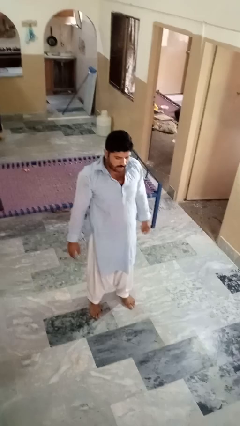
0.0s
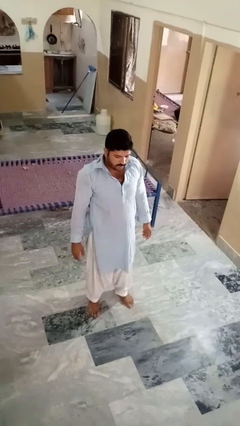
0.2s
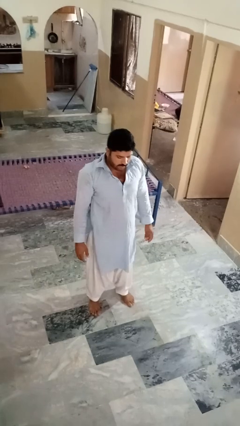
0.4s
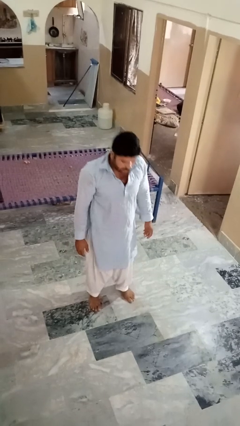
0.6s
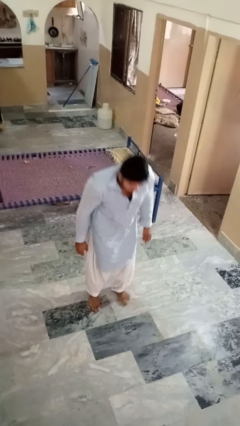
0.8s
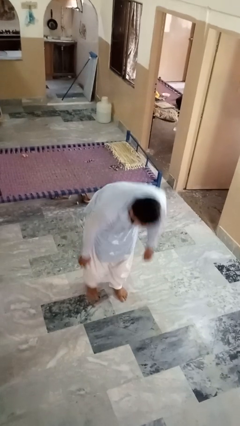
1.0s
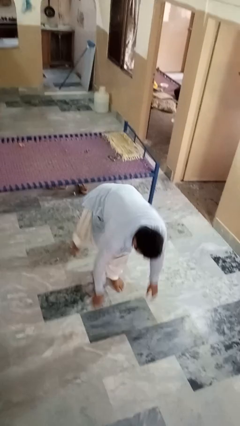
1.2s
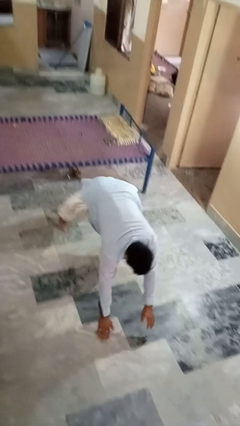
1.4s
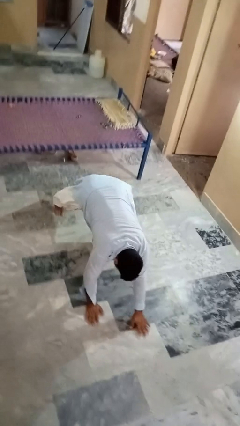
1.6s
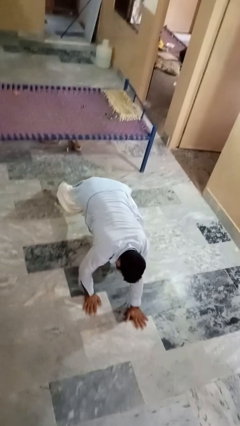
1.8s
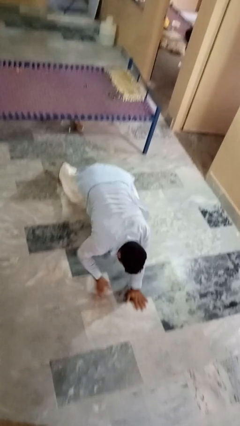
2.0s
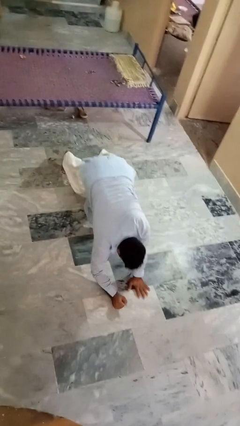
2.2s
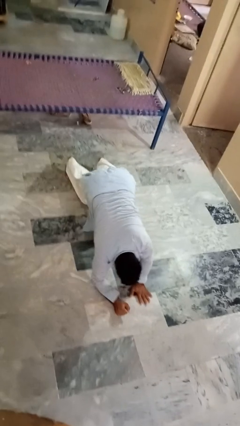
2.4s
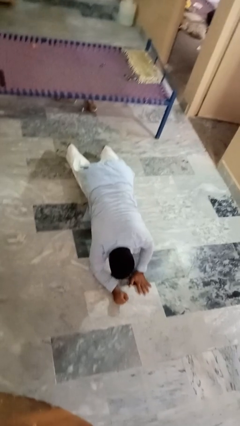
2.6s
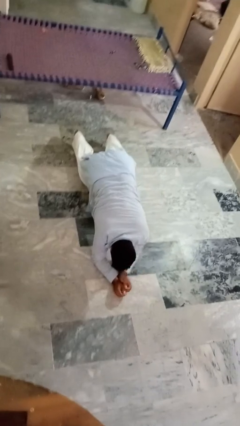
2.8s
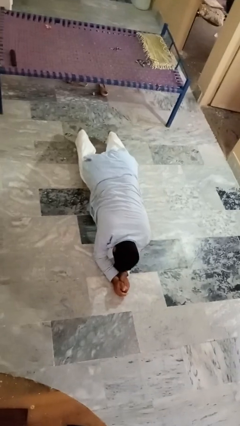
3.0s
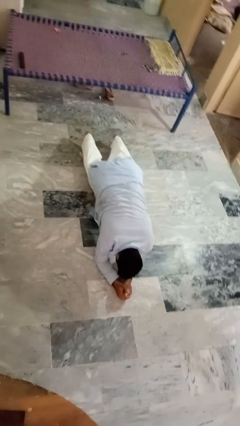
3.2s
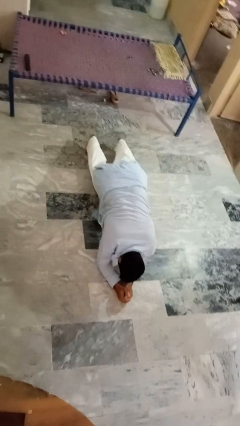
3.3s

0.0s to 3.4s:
person exercises with plank

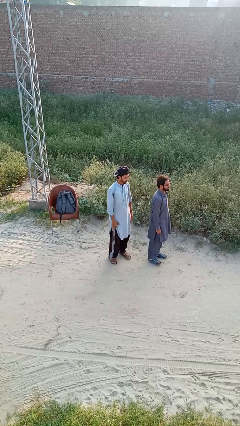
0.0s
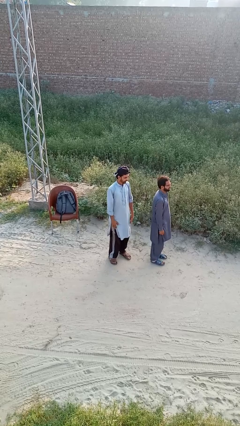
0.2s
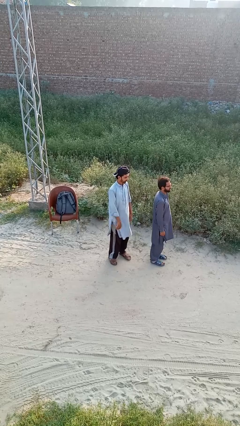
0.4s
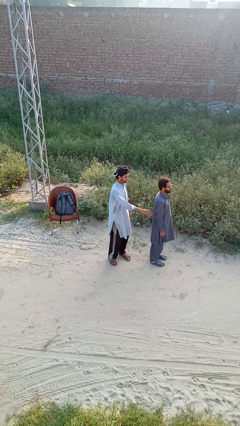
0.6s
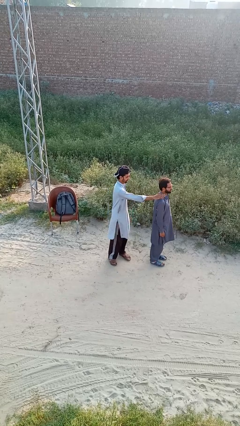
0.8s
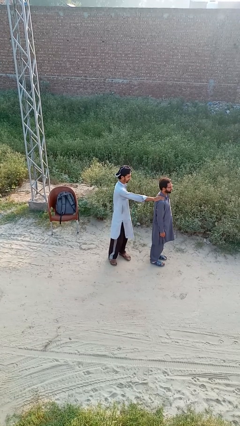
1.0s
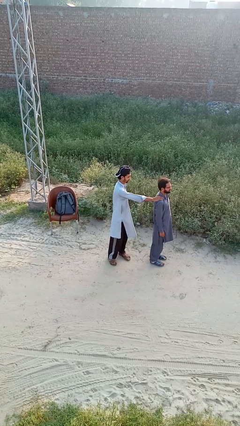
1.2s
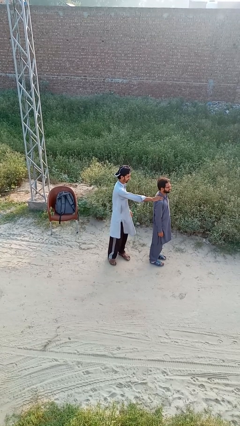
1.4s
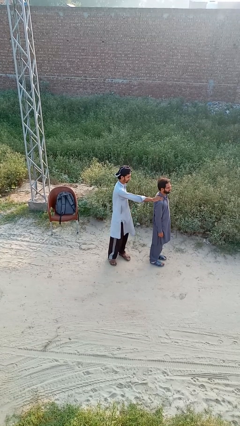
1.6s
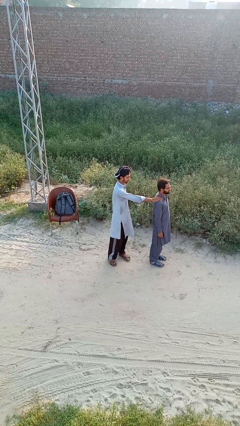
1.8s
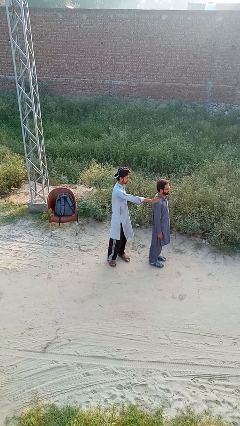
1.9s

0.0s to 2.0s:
person grabs person by shoulder

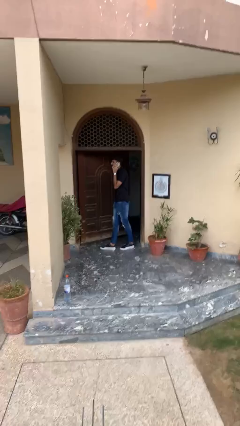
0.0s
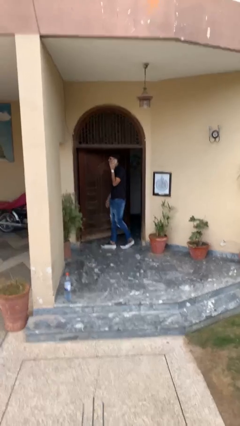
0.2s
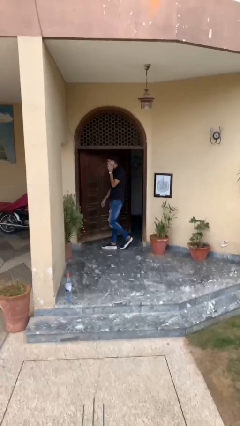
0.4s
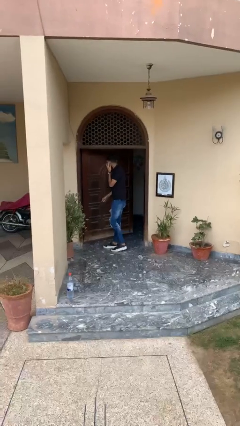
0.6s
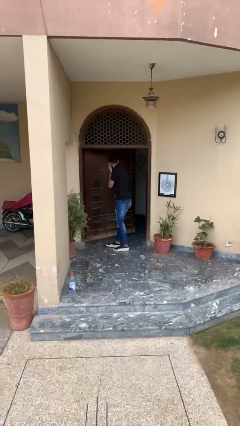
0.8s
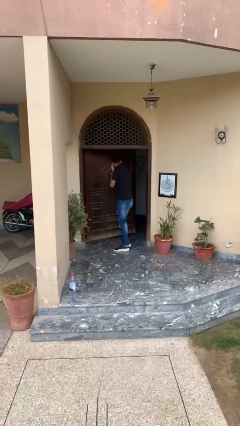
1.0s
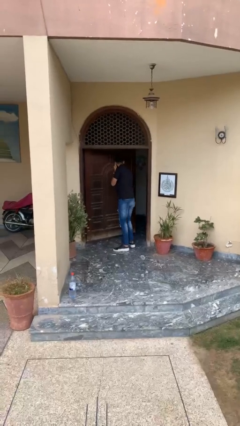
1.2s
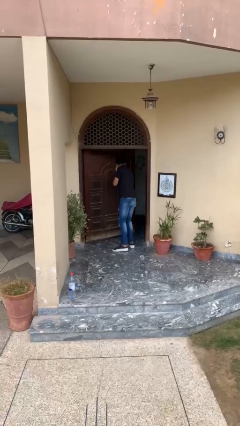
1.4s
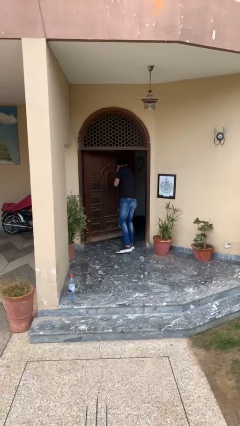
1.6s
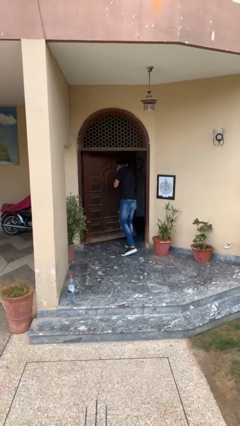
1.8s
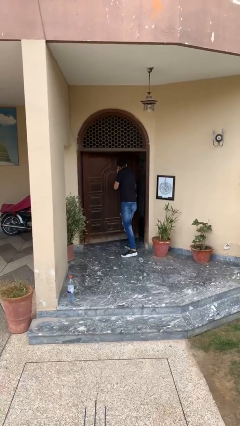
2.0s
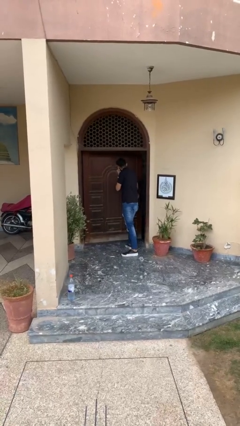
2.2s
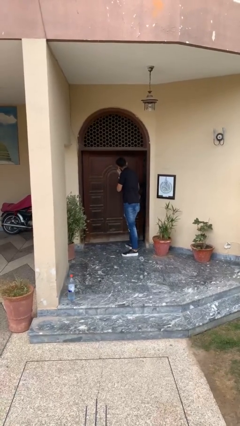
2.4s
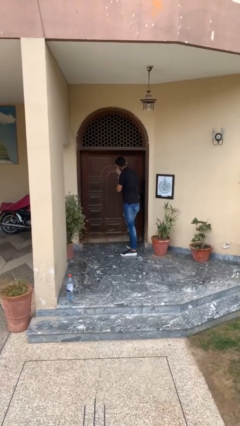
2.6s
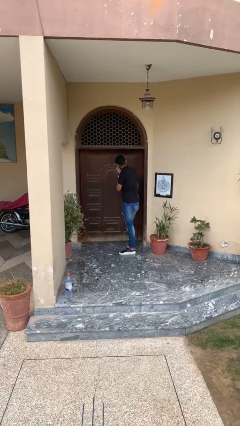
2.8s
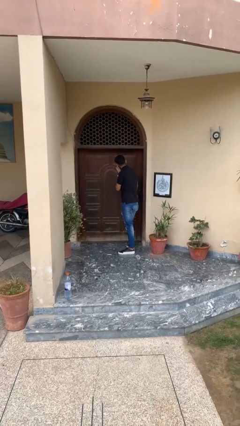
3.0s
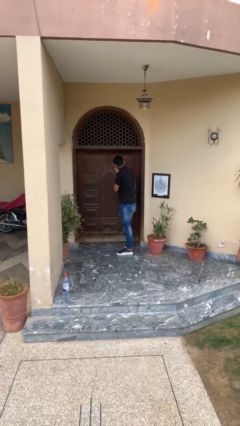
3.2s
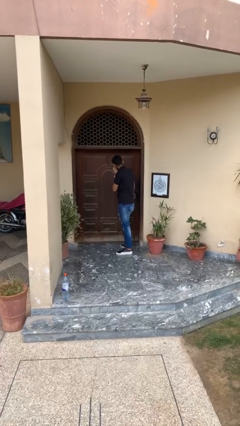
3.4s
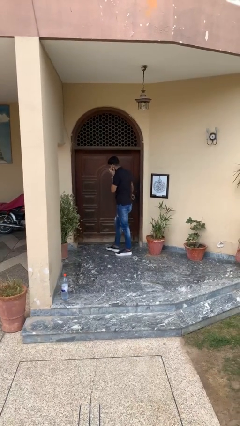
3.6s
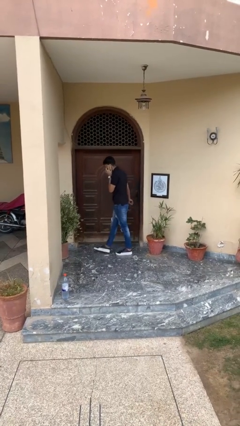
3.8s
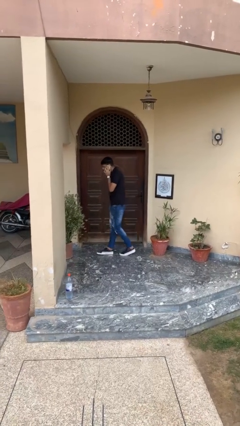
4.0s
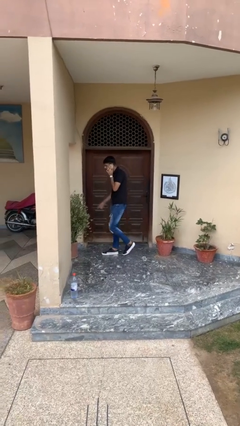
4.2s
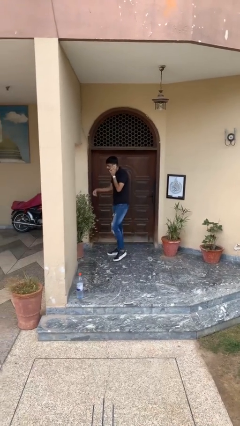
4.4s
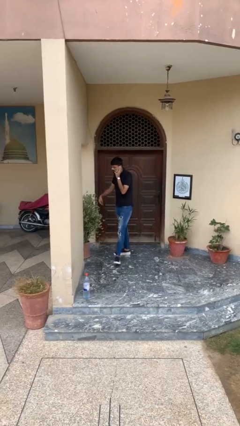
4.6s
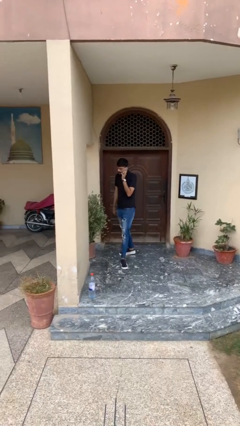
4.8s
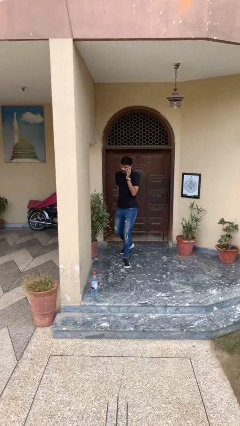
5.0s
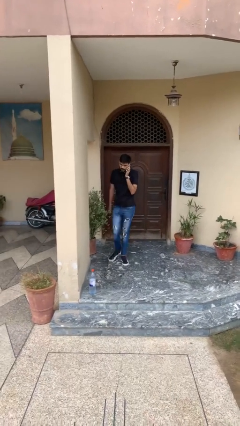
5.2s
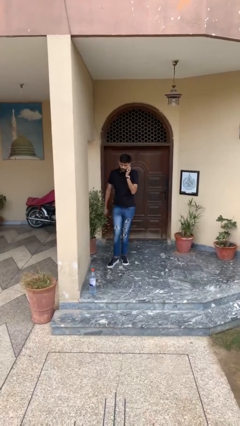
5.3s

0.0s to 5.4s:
person closes facility door

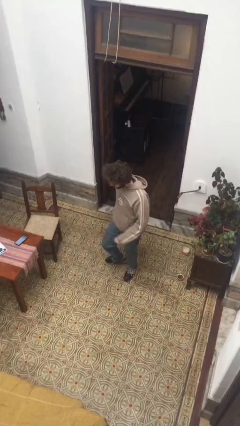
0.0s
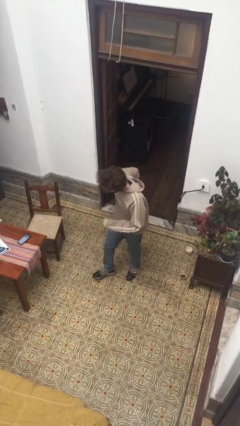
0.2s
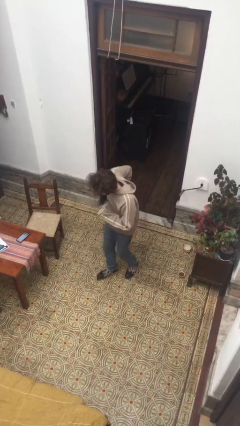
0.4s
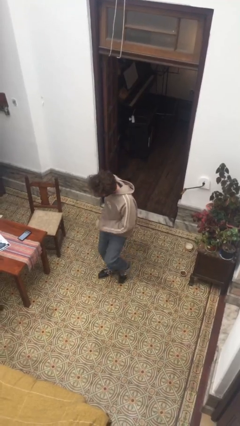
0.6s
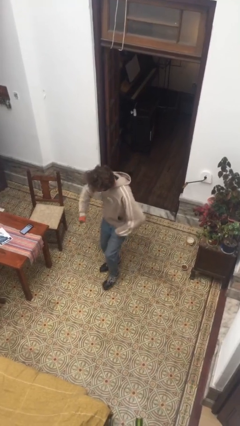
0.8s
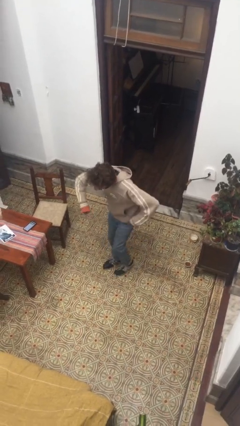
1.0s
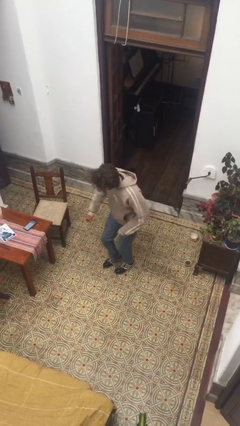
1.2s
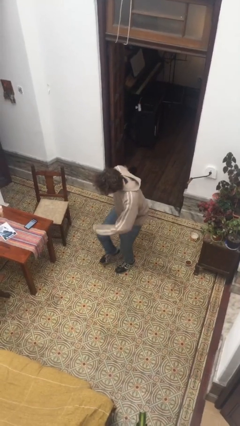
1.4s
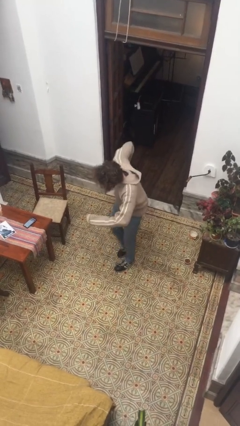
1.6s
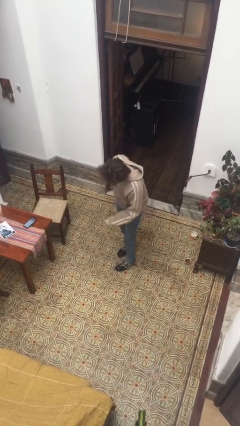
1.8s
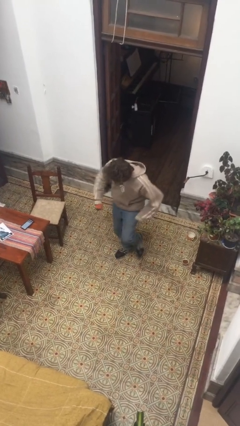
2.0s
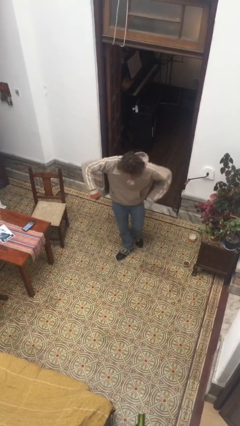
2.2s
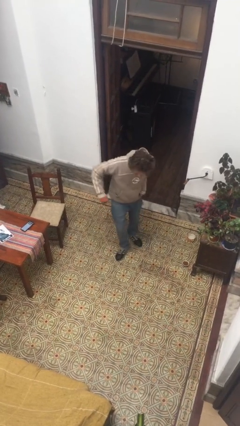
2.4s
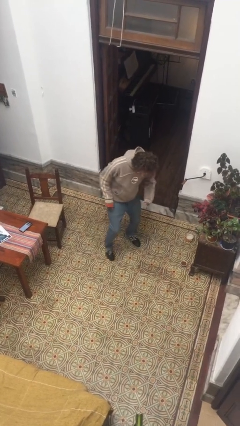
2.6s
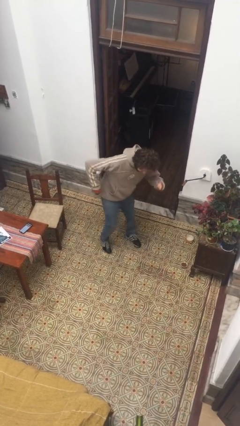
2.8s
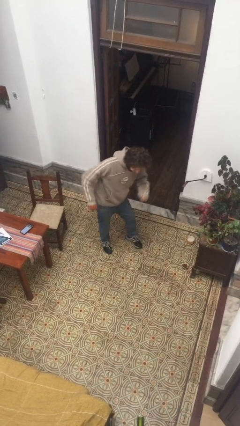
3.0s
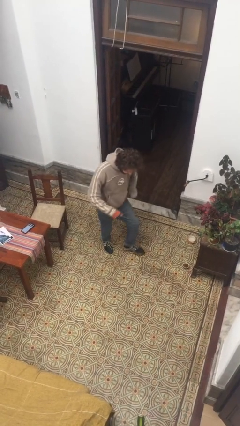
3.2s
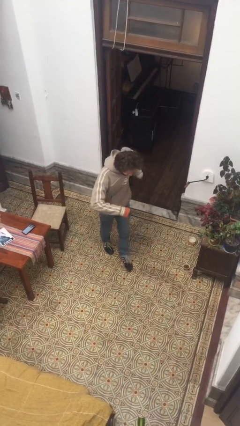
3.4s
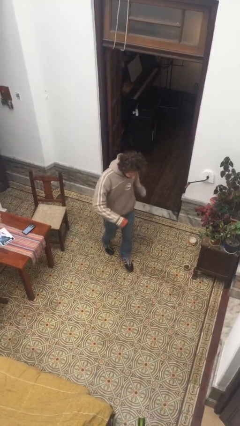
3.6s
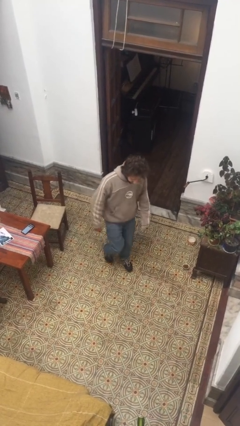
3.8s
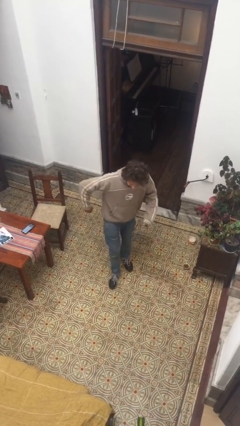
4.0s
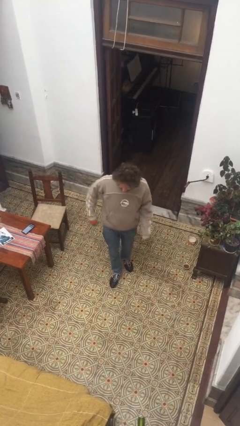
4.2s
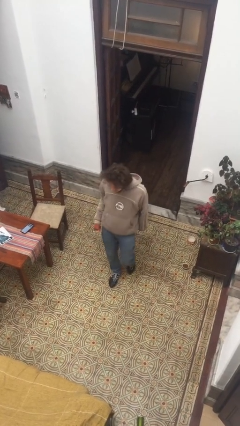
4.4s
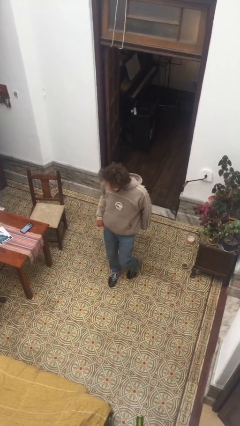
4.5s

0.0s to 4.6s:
person dances in place

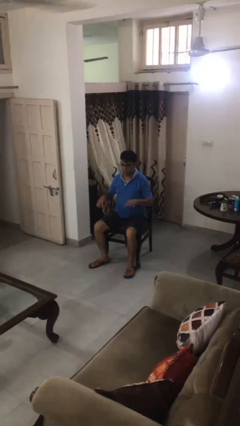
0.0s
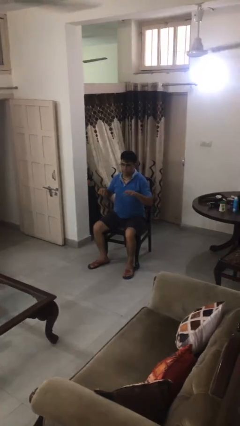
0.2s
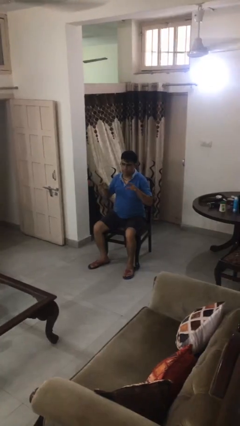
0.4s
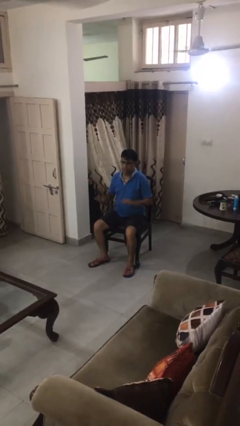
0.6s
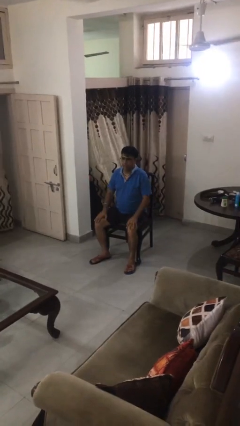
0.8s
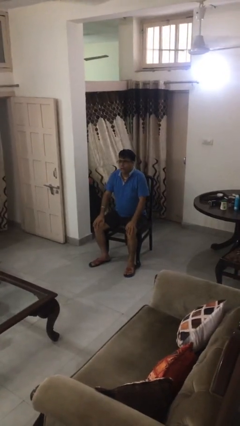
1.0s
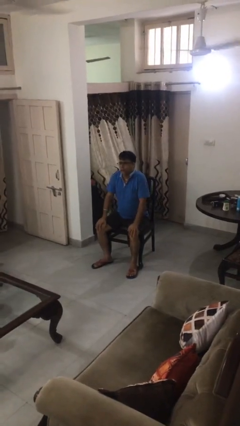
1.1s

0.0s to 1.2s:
person slaps hands on thighs

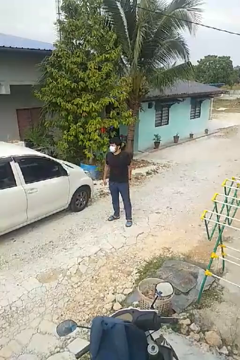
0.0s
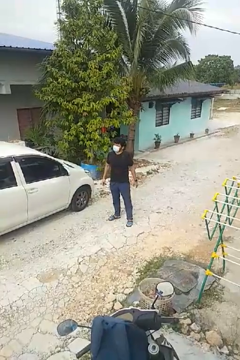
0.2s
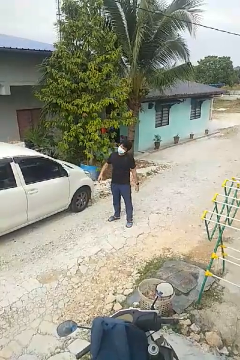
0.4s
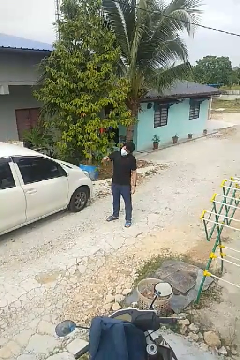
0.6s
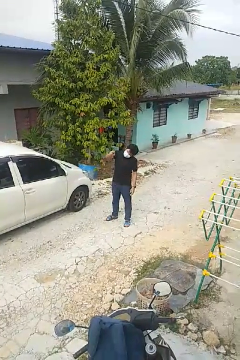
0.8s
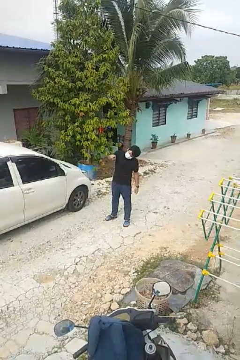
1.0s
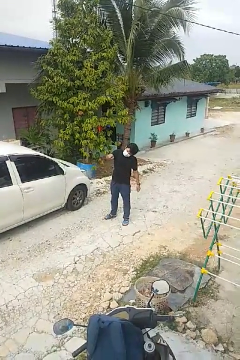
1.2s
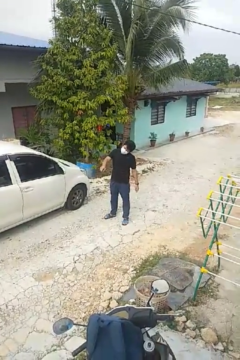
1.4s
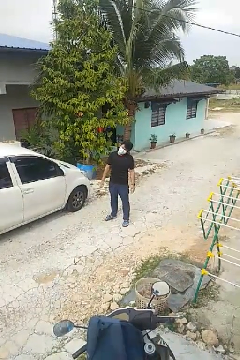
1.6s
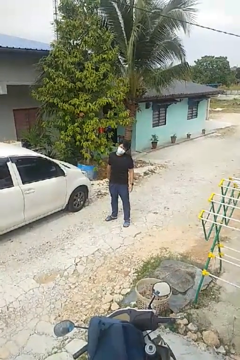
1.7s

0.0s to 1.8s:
person points at person
